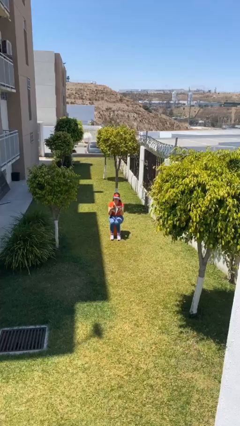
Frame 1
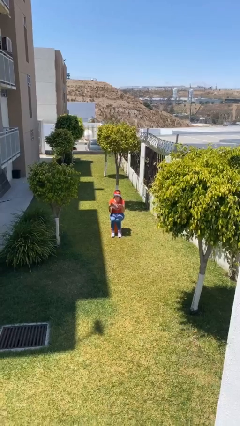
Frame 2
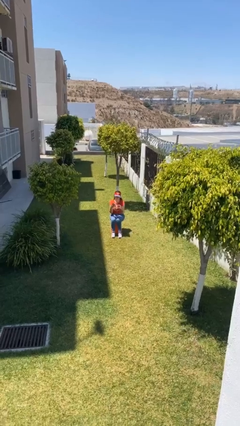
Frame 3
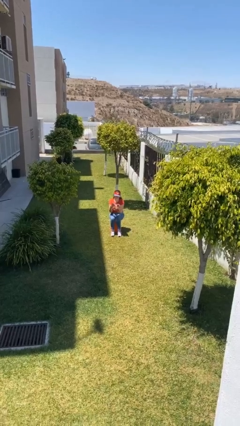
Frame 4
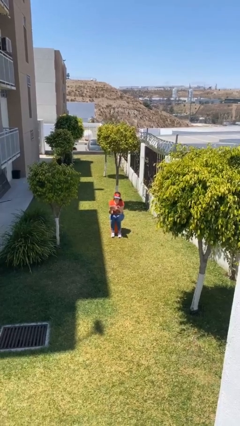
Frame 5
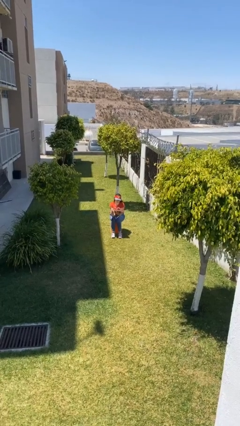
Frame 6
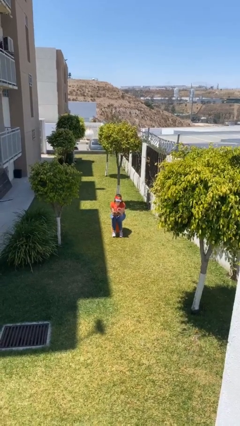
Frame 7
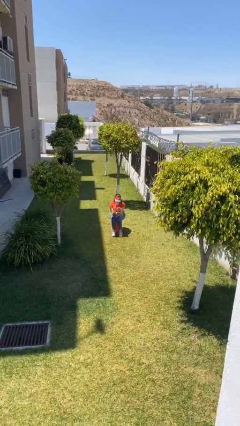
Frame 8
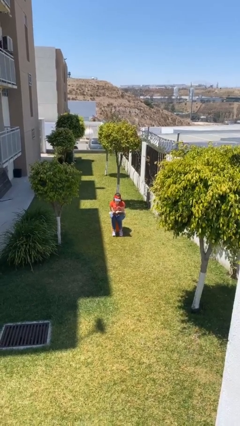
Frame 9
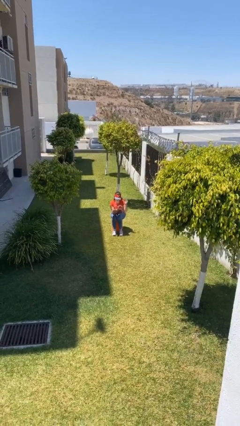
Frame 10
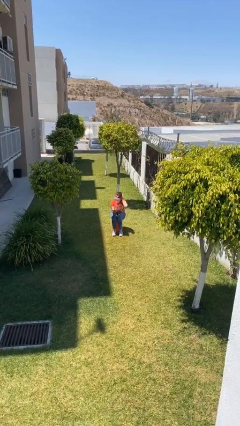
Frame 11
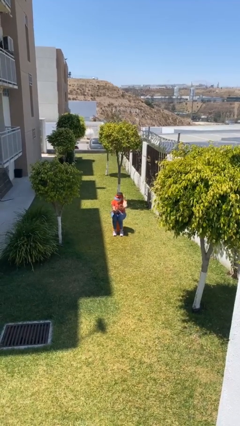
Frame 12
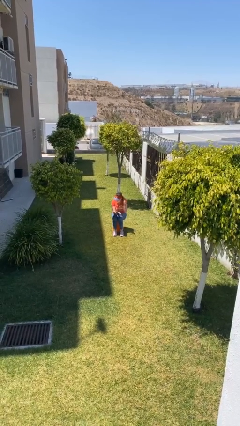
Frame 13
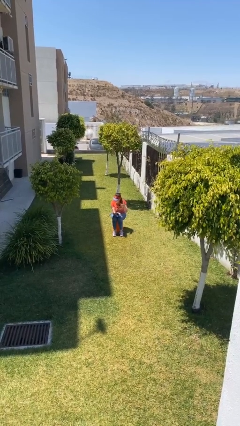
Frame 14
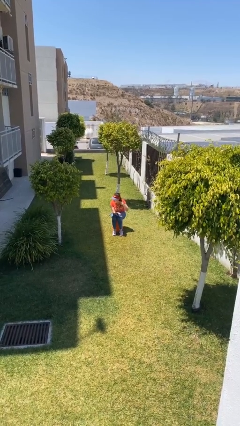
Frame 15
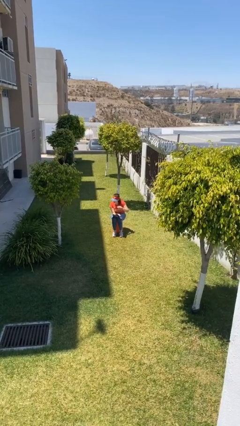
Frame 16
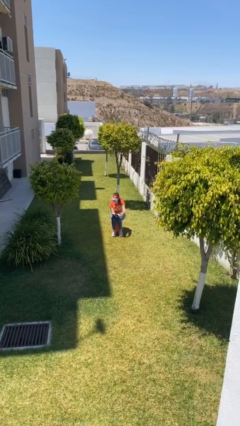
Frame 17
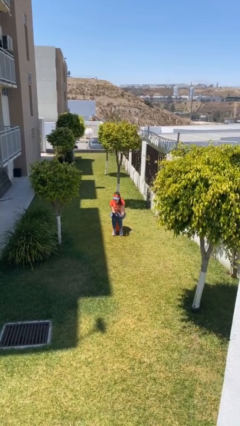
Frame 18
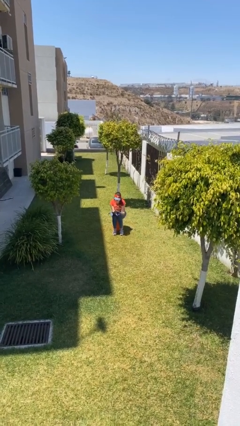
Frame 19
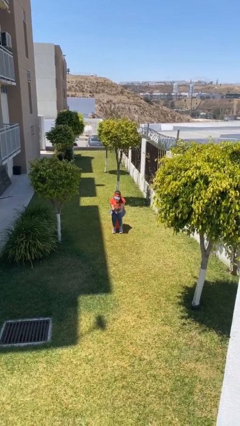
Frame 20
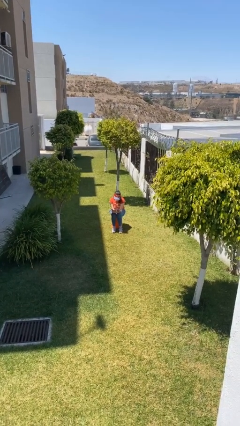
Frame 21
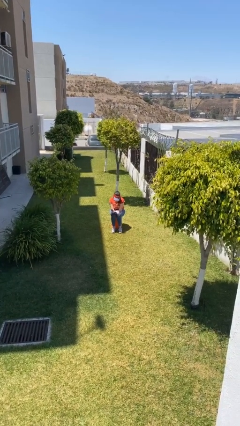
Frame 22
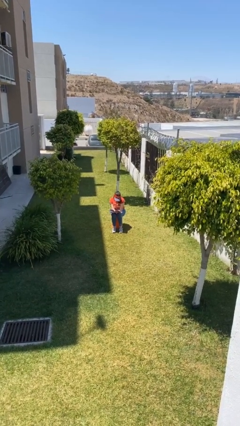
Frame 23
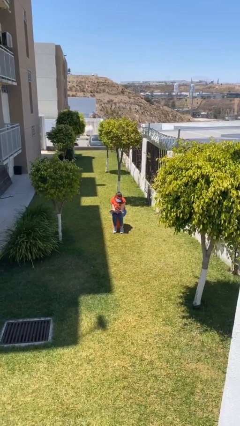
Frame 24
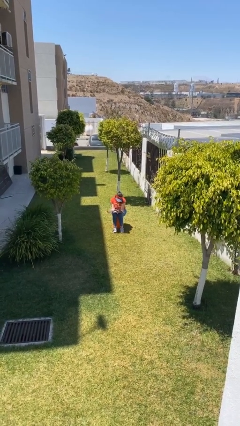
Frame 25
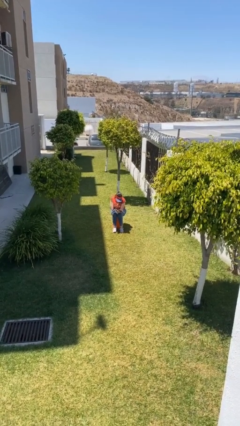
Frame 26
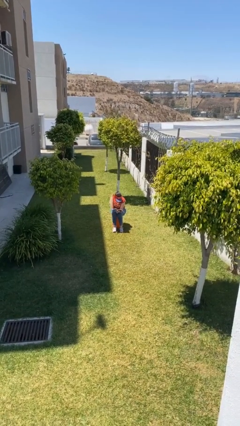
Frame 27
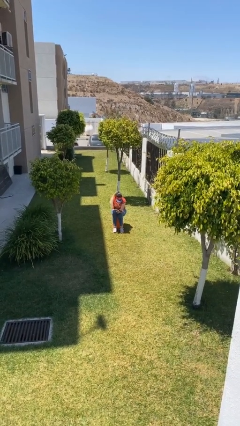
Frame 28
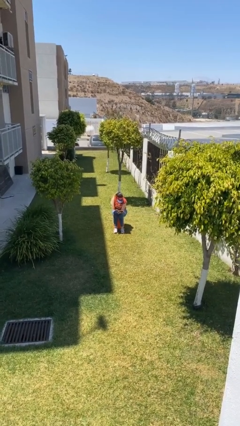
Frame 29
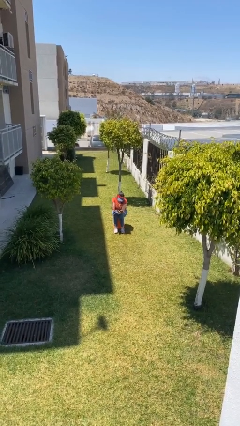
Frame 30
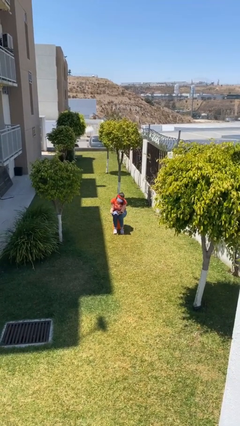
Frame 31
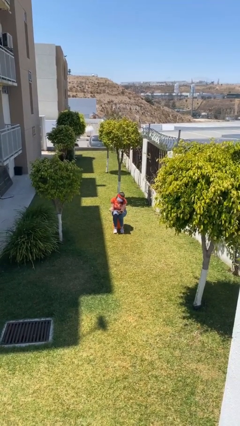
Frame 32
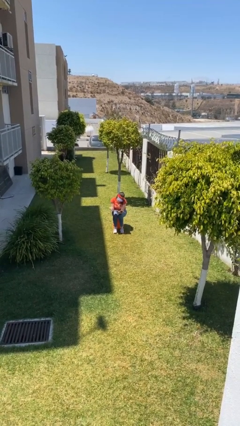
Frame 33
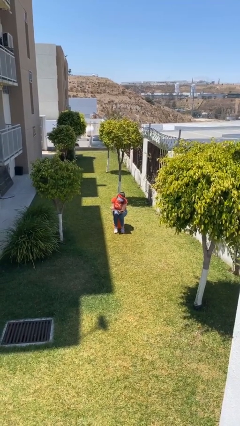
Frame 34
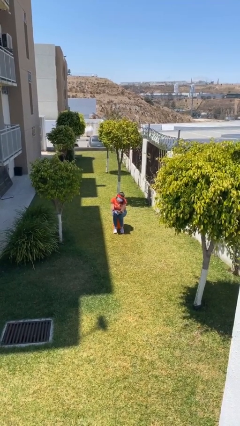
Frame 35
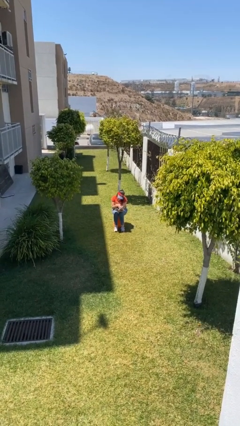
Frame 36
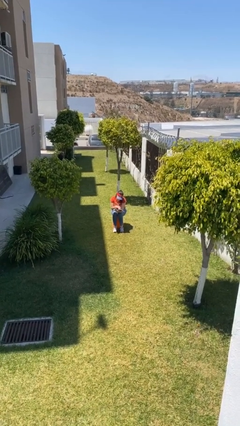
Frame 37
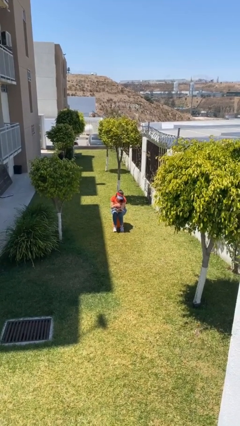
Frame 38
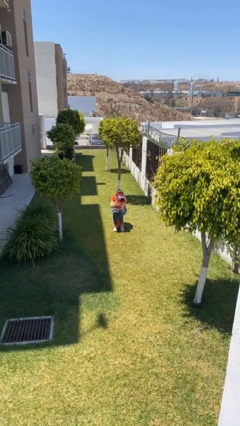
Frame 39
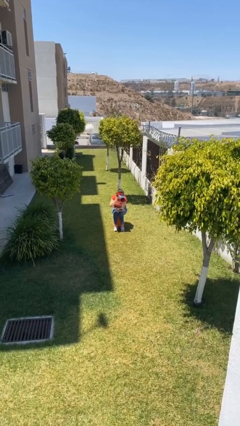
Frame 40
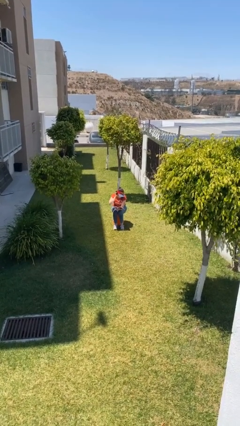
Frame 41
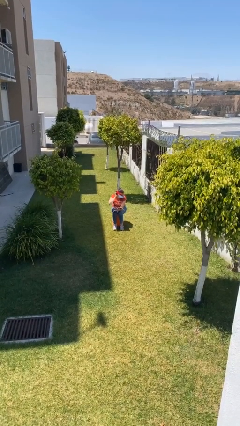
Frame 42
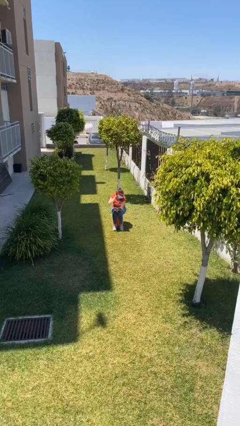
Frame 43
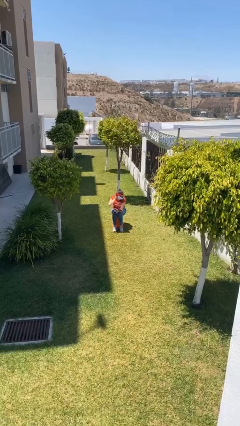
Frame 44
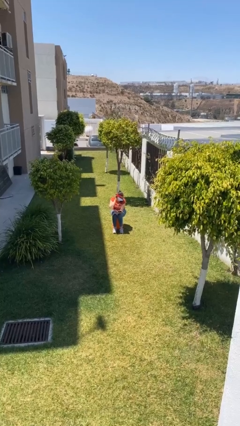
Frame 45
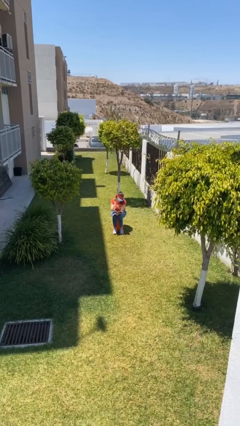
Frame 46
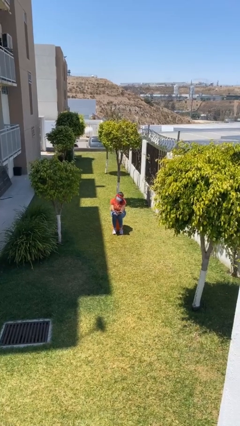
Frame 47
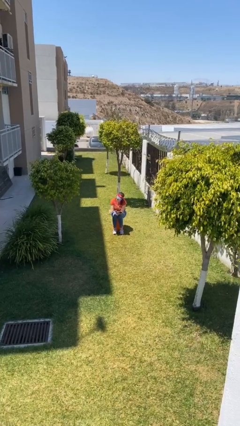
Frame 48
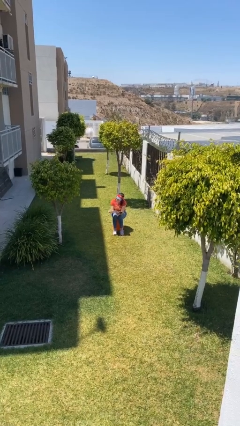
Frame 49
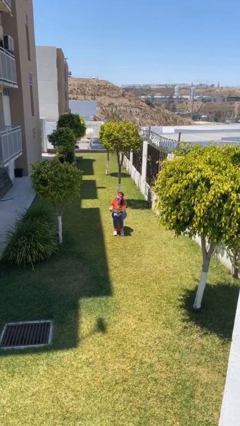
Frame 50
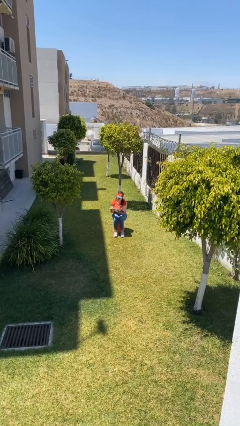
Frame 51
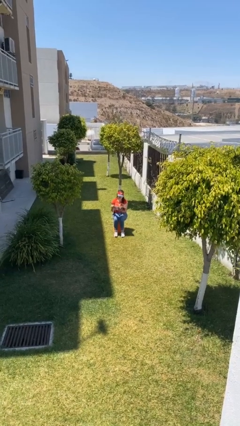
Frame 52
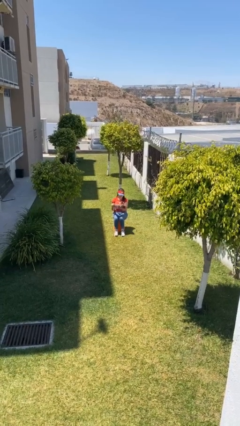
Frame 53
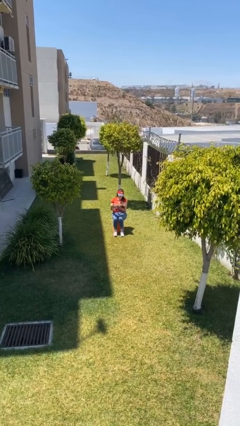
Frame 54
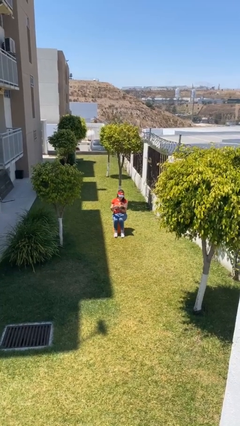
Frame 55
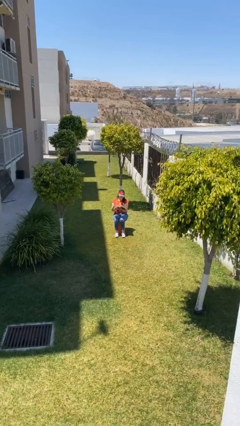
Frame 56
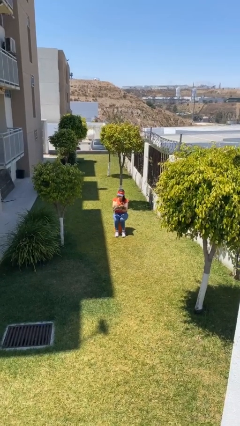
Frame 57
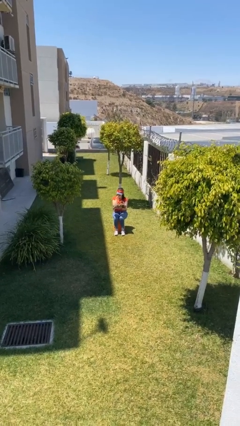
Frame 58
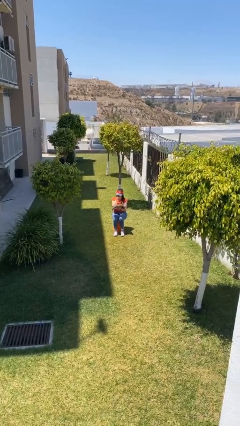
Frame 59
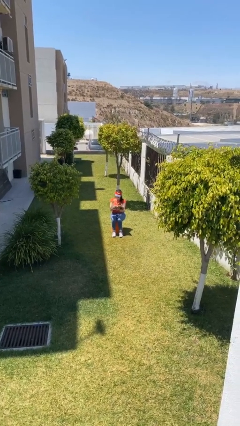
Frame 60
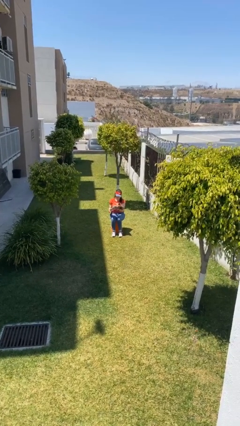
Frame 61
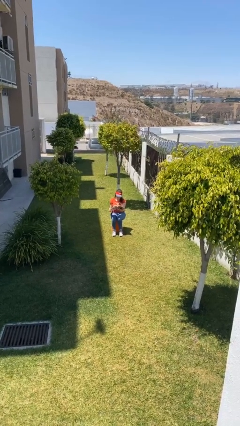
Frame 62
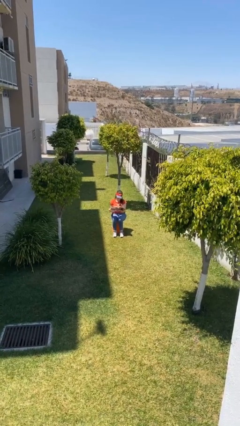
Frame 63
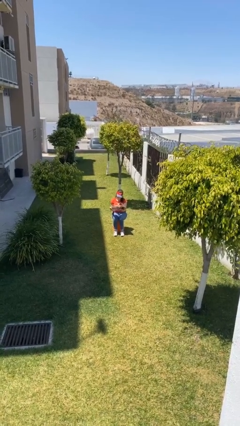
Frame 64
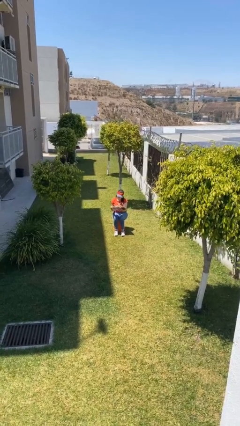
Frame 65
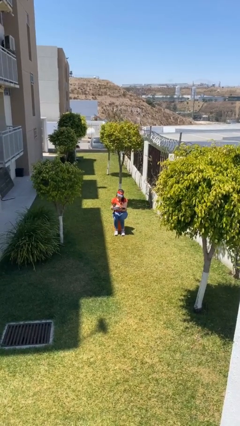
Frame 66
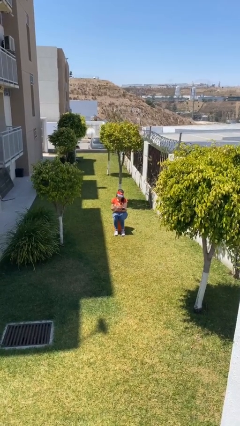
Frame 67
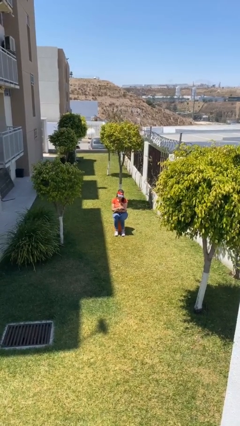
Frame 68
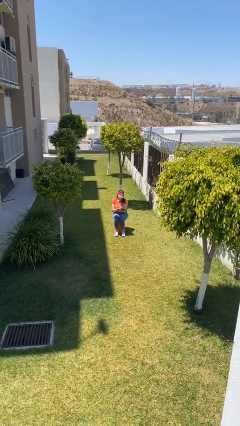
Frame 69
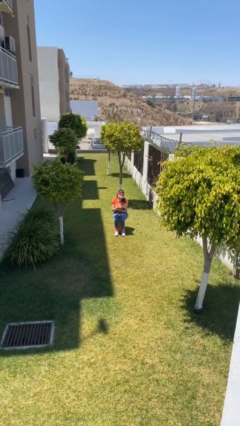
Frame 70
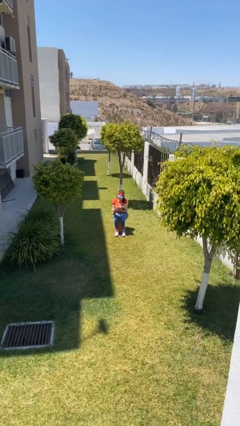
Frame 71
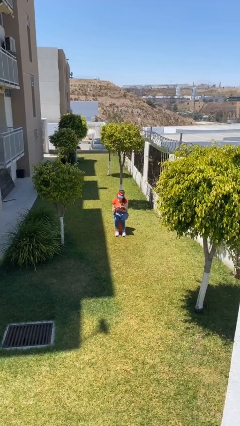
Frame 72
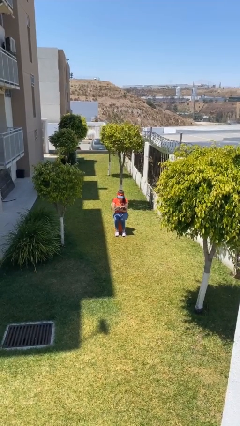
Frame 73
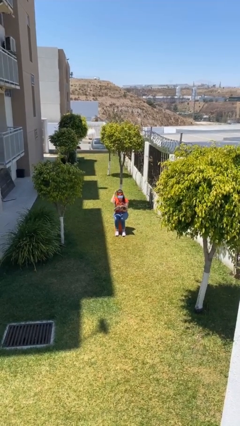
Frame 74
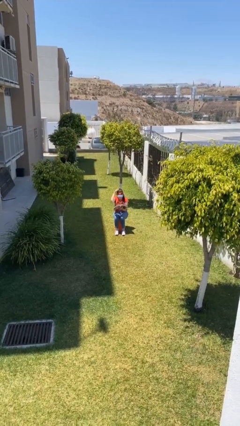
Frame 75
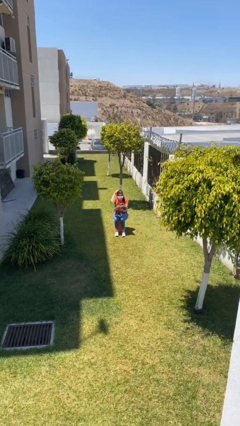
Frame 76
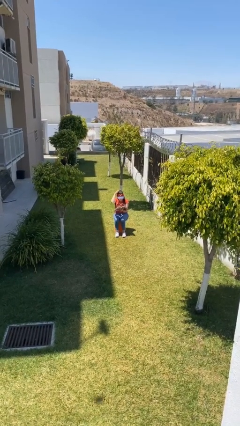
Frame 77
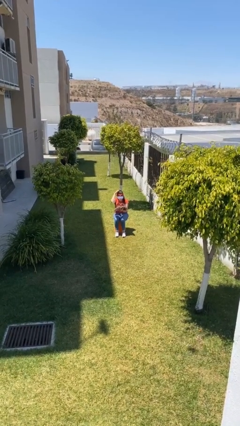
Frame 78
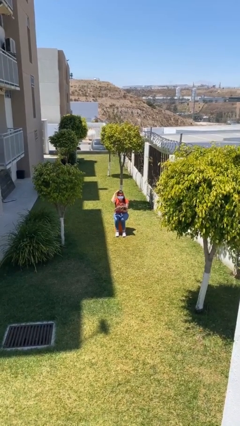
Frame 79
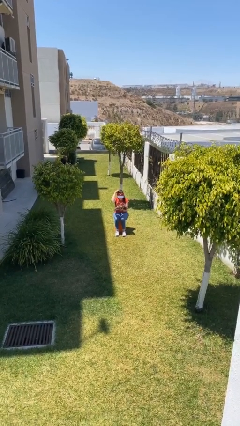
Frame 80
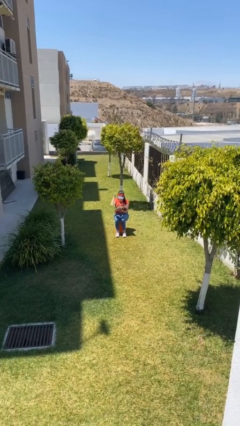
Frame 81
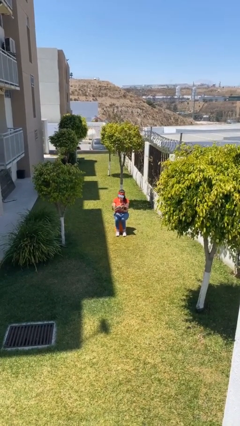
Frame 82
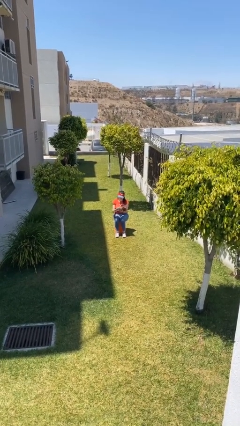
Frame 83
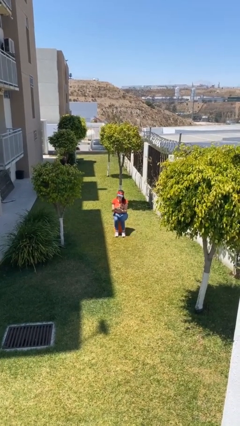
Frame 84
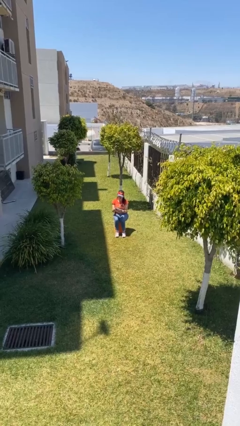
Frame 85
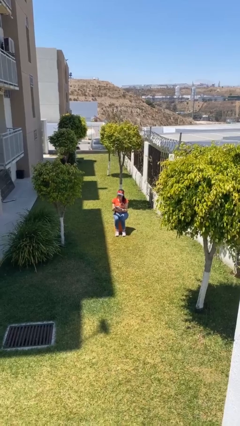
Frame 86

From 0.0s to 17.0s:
person reads document

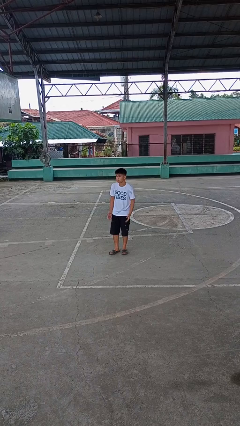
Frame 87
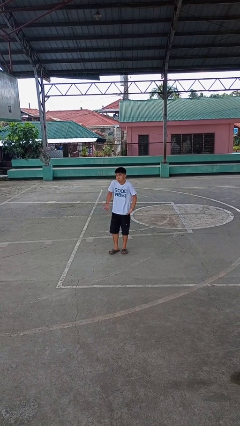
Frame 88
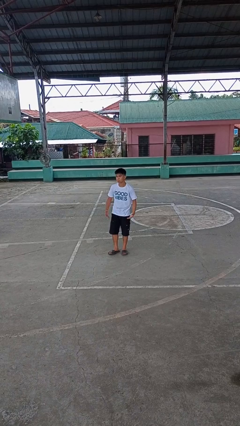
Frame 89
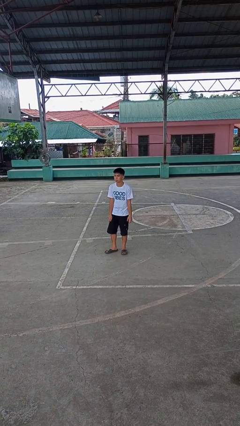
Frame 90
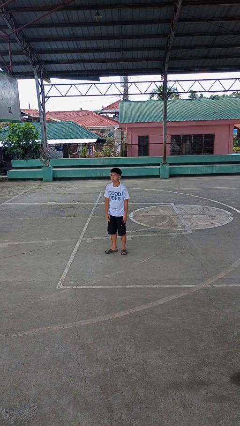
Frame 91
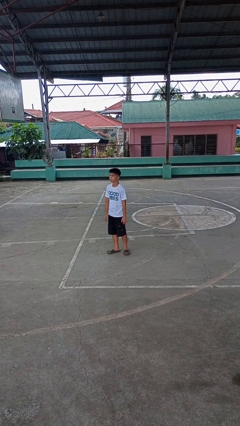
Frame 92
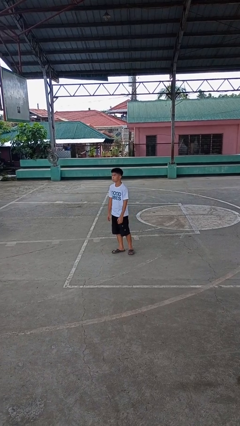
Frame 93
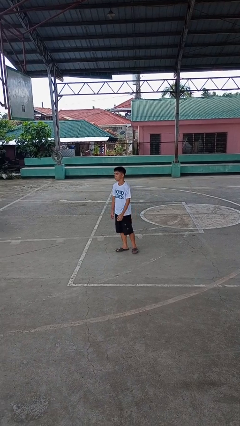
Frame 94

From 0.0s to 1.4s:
person shrugs
